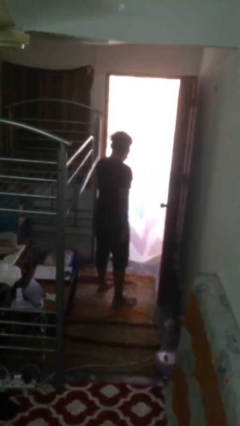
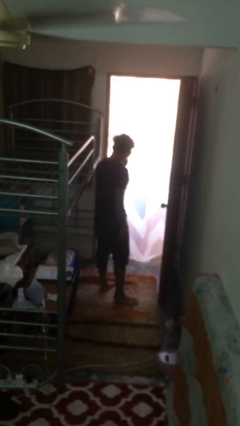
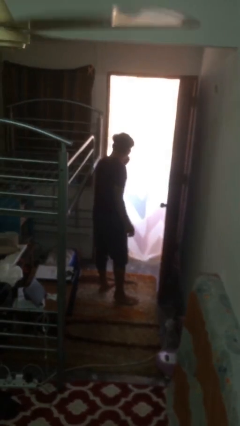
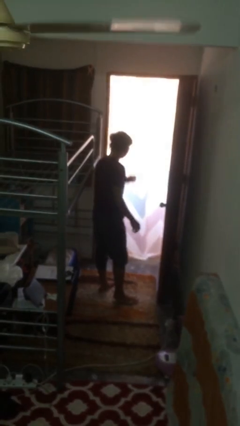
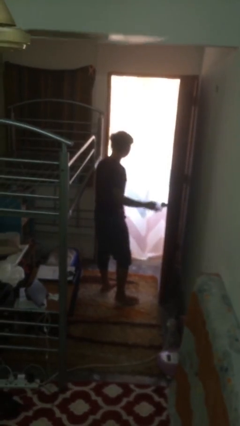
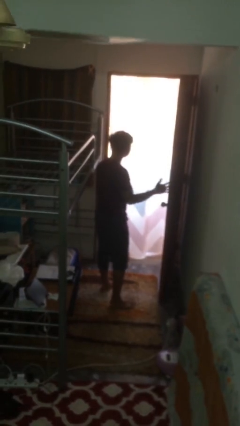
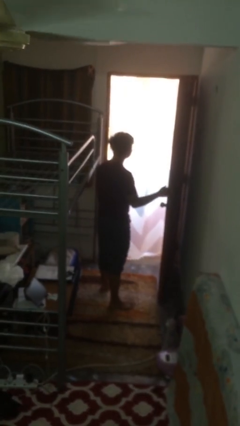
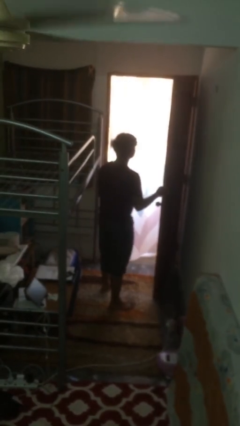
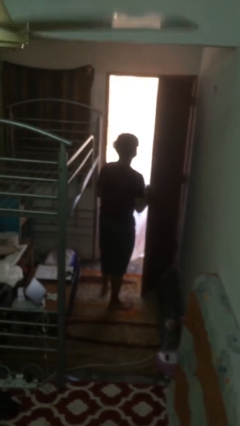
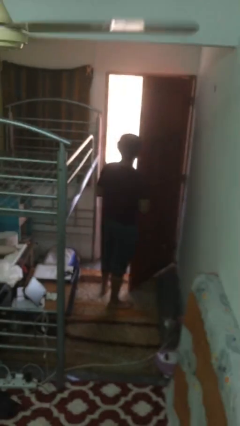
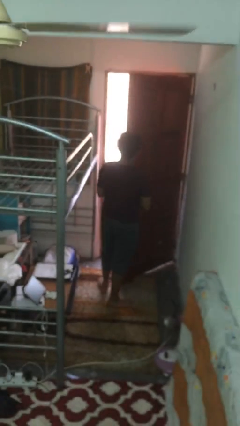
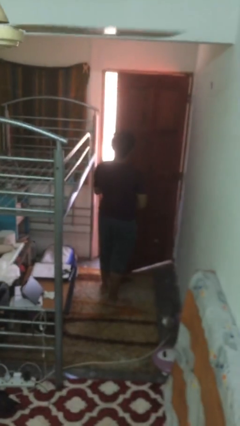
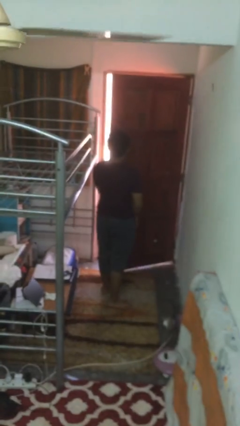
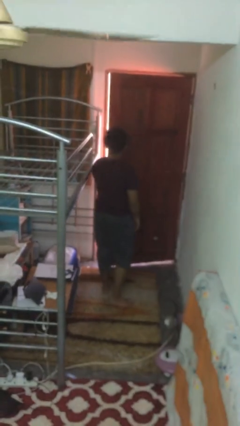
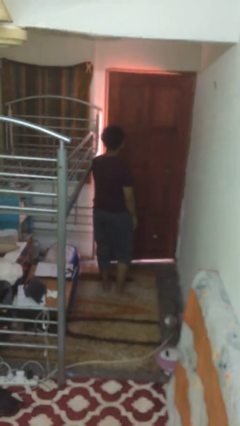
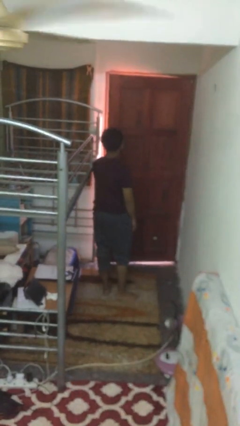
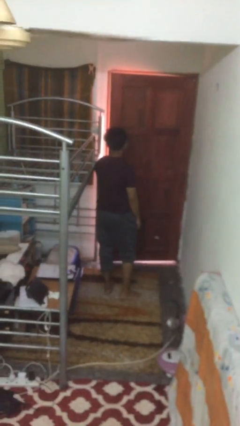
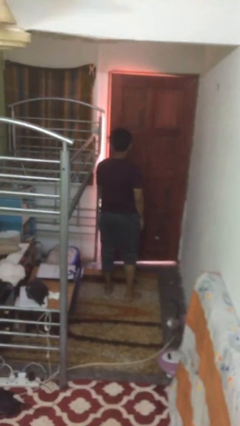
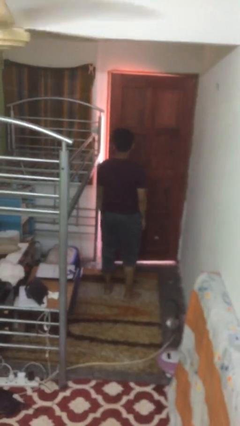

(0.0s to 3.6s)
person closes facility door

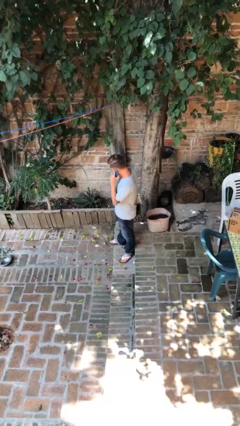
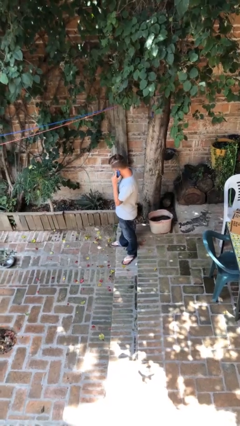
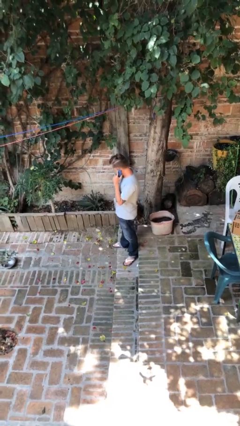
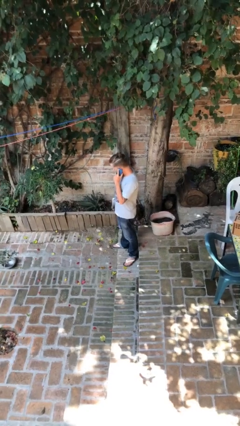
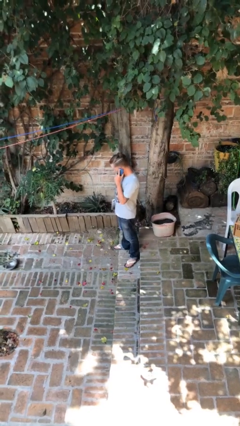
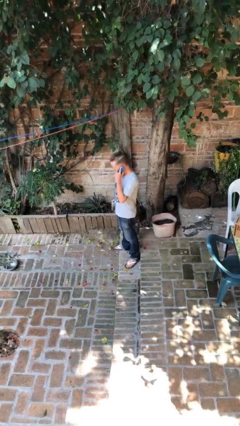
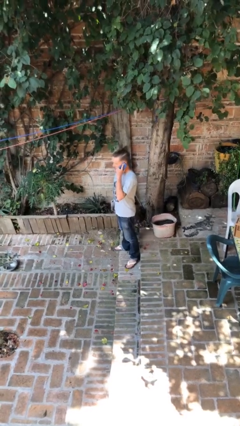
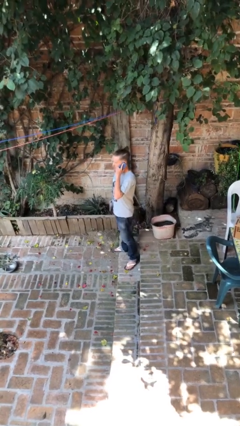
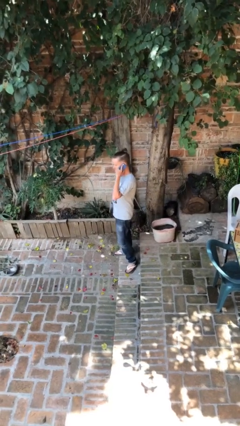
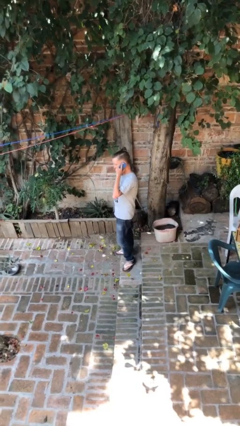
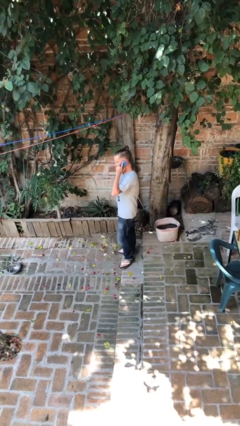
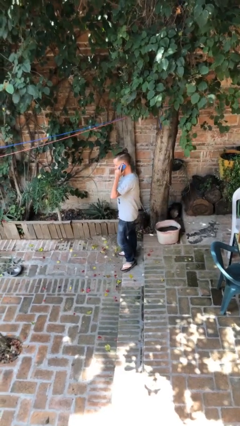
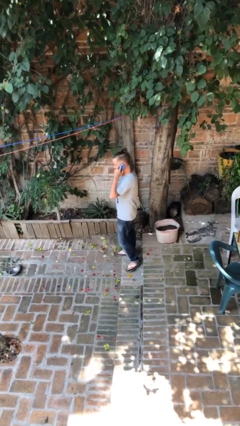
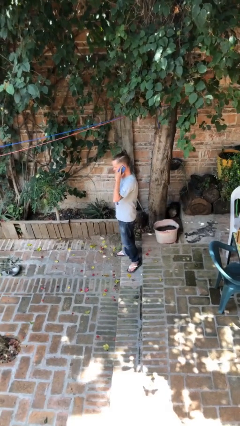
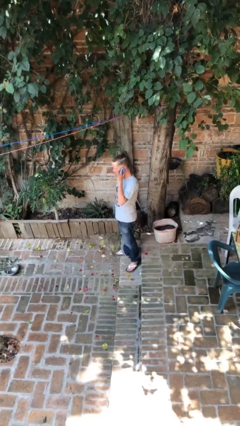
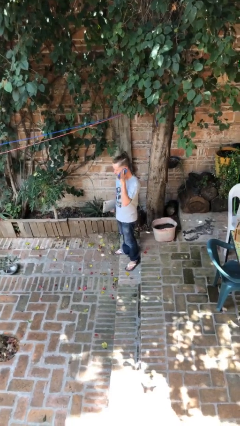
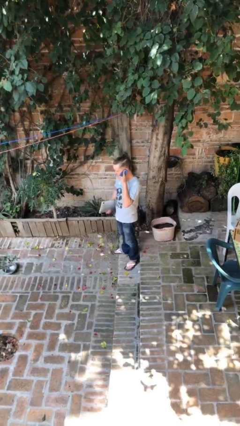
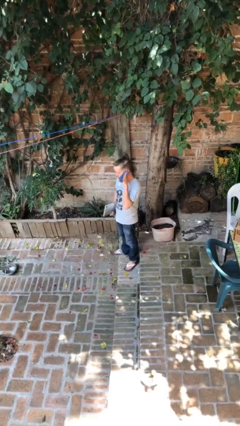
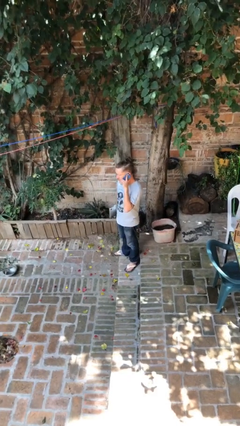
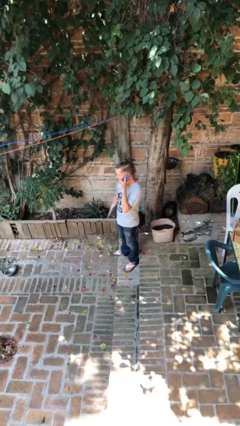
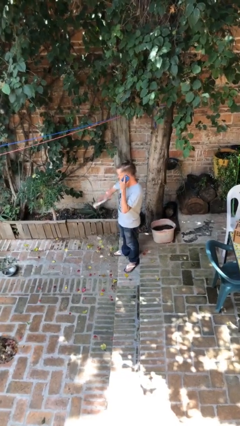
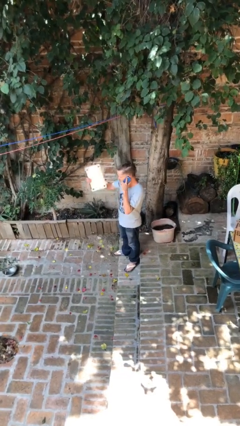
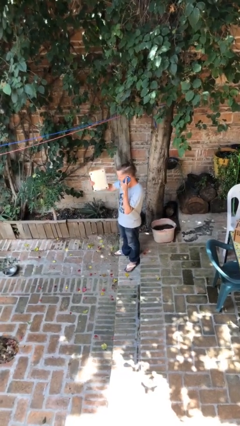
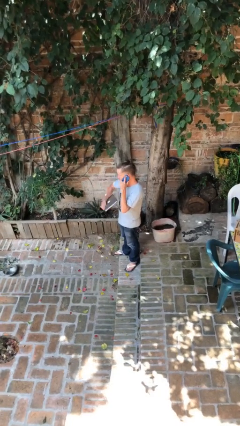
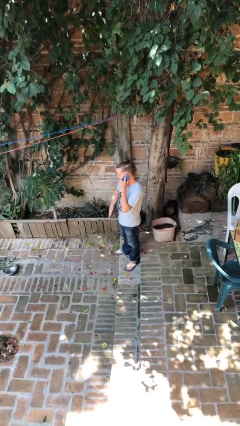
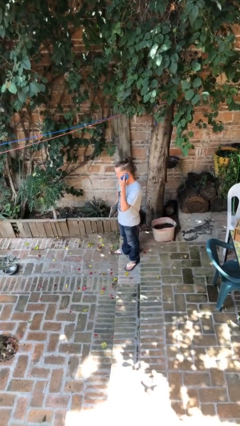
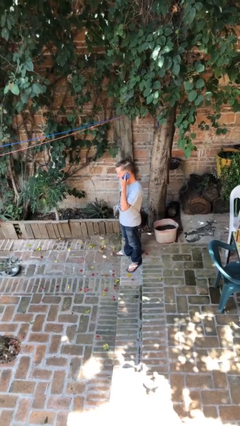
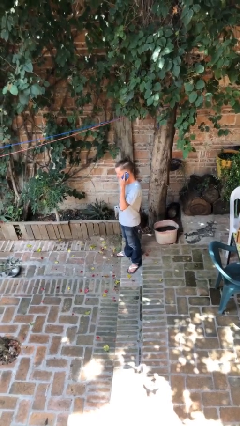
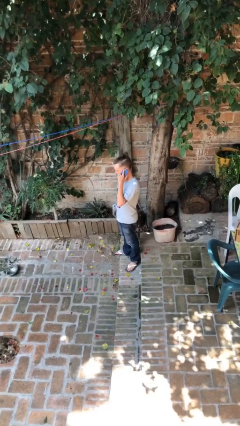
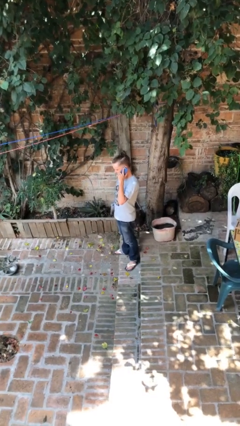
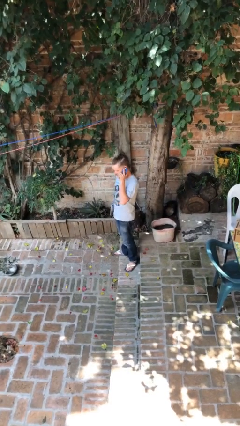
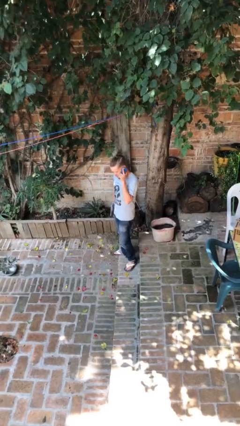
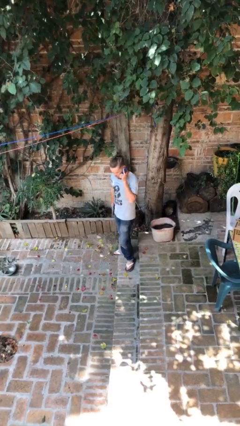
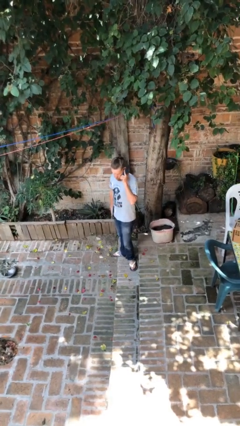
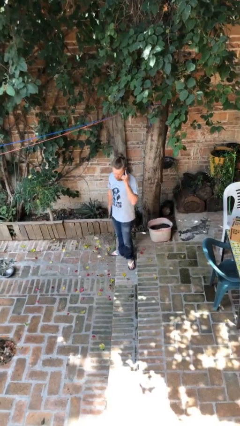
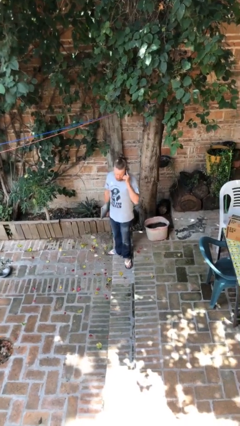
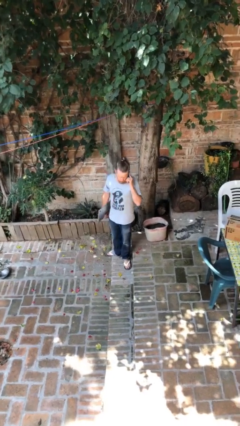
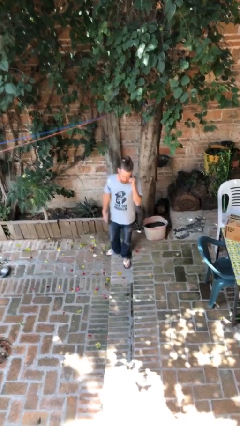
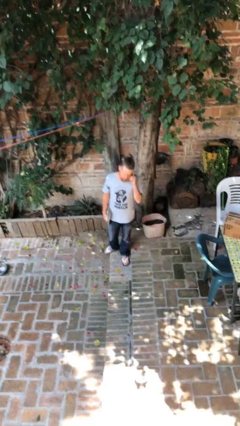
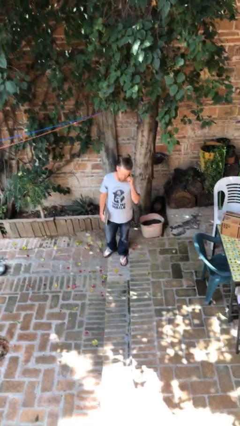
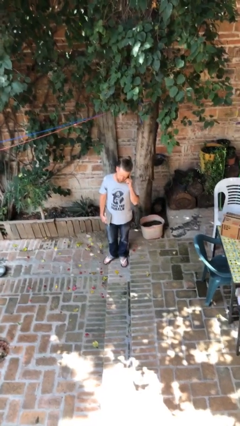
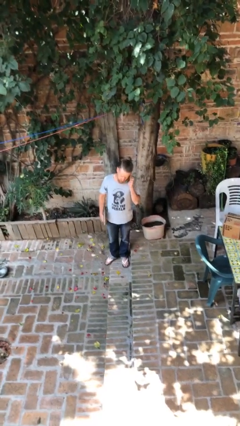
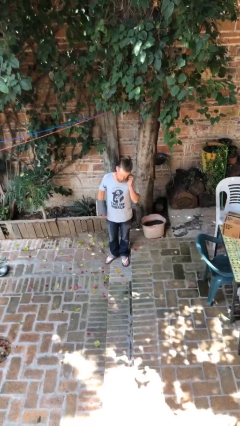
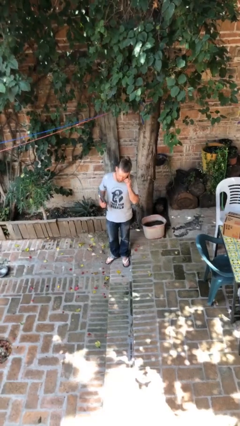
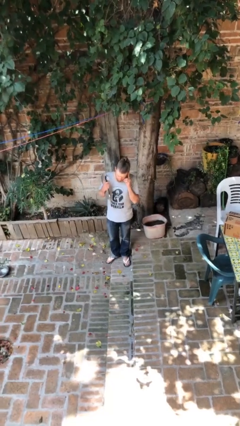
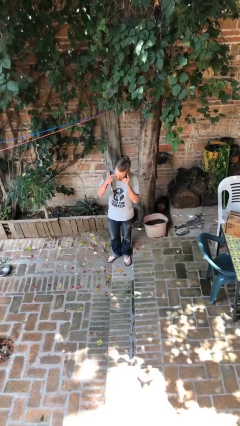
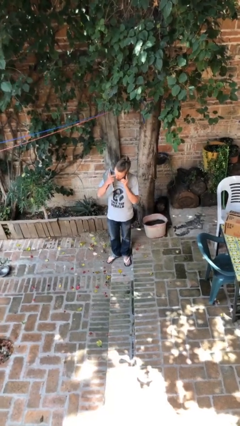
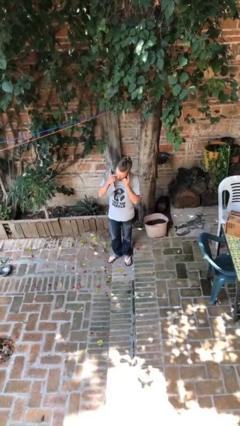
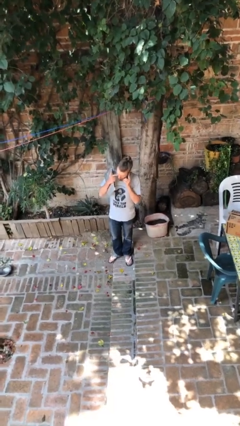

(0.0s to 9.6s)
person talks on phone

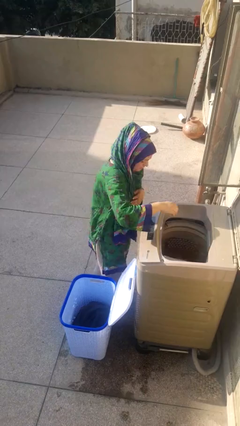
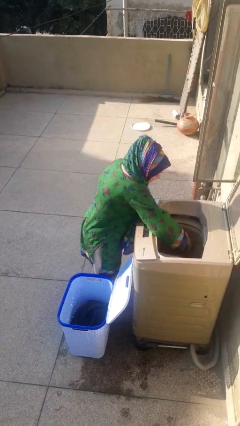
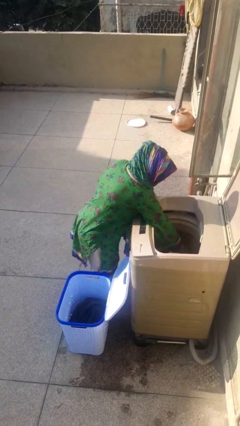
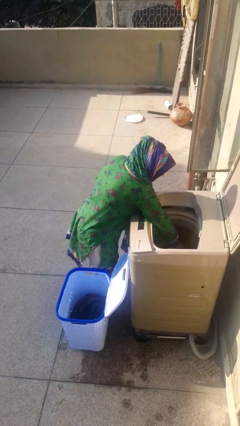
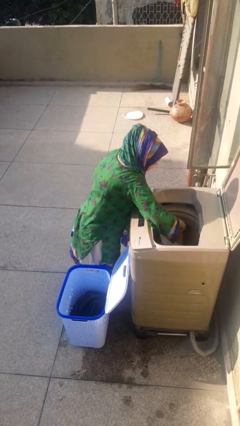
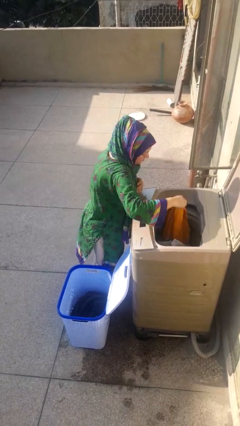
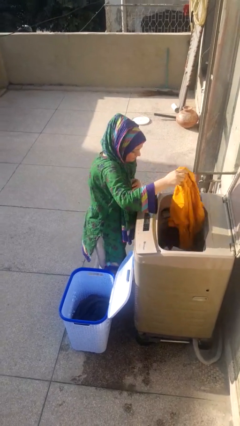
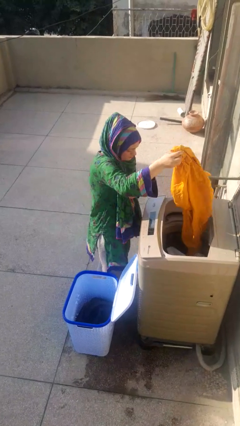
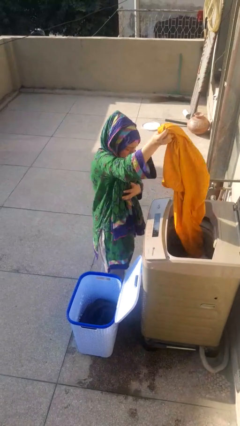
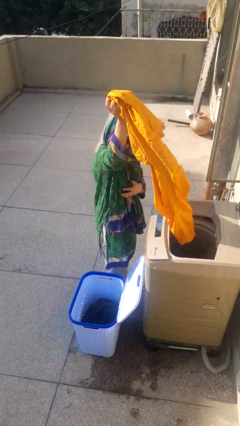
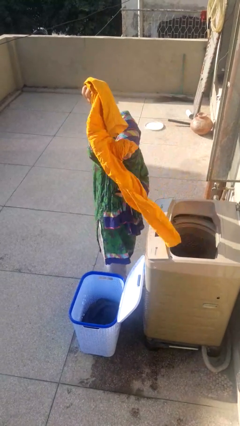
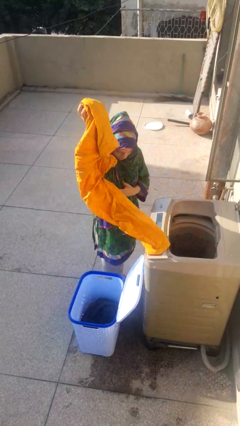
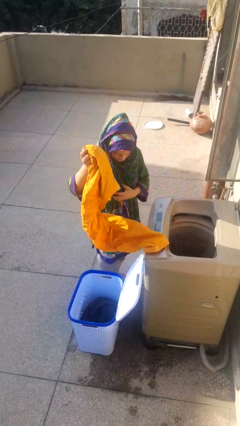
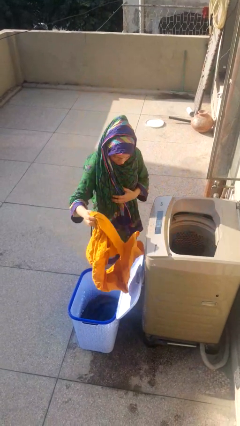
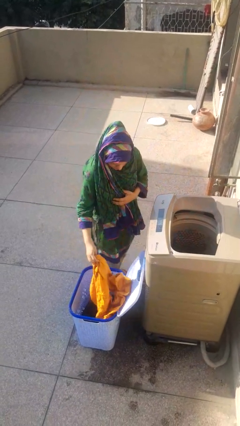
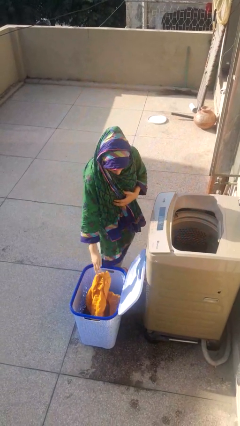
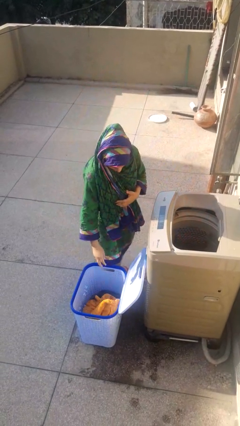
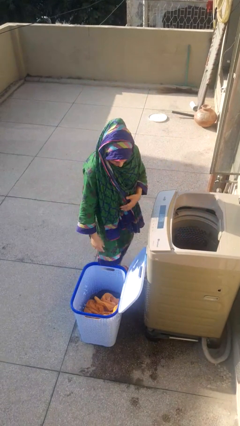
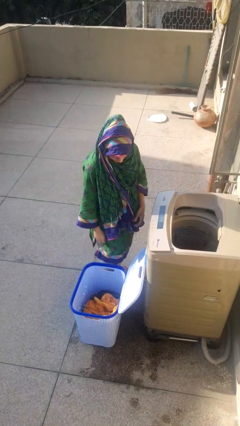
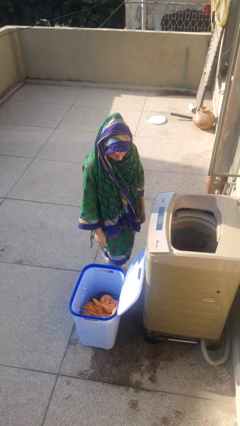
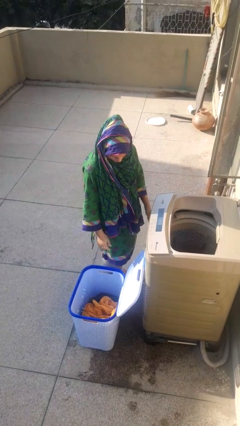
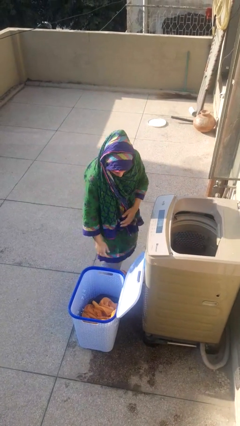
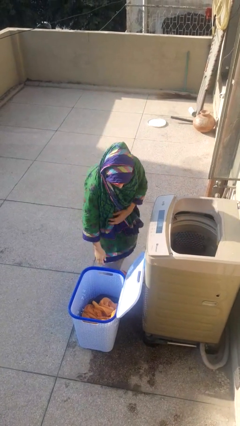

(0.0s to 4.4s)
person unloads clotheswasher
